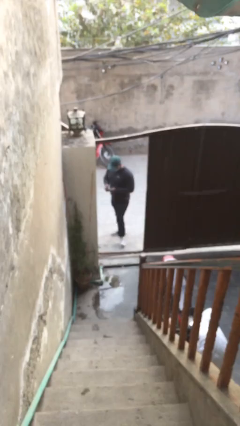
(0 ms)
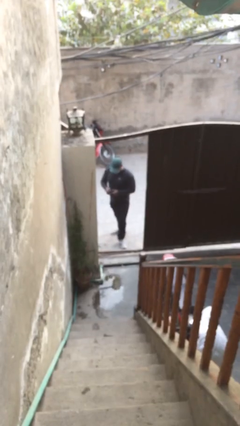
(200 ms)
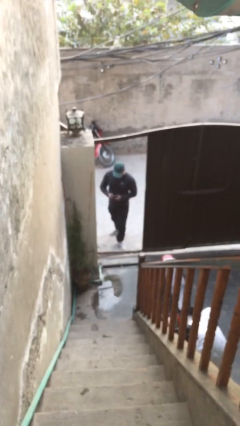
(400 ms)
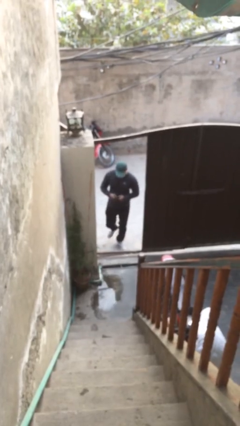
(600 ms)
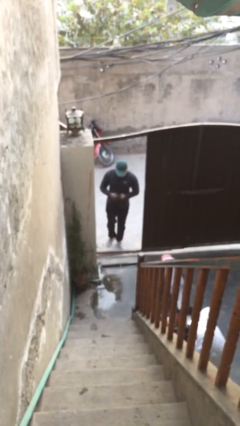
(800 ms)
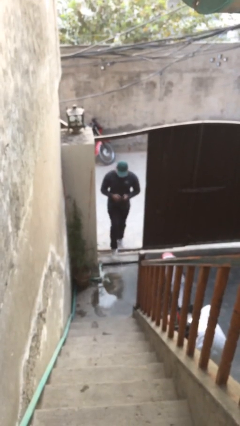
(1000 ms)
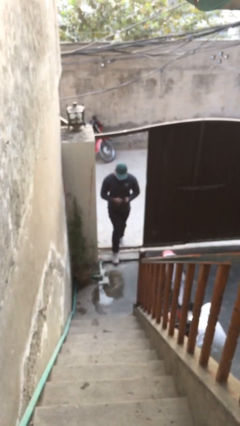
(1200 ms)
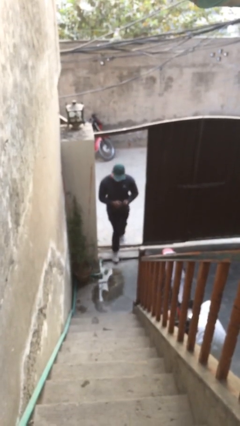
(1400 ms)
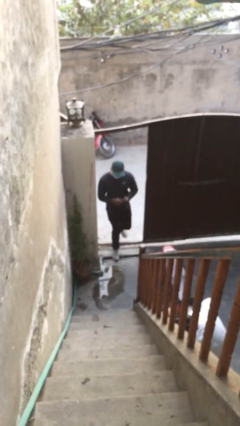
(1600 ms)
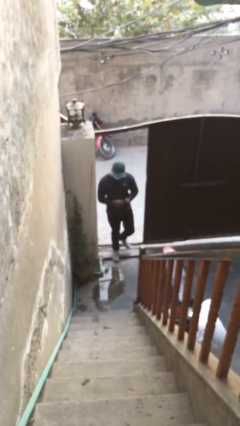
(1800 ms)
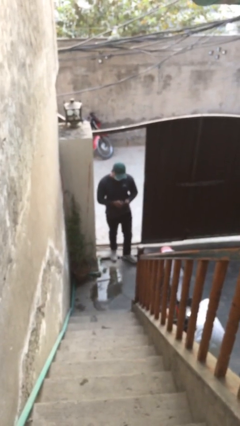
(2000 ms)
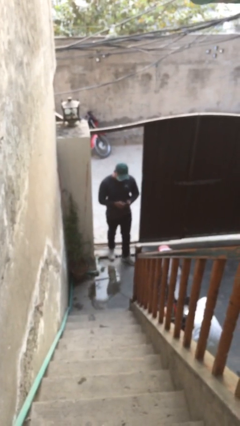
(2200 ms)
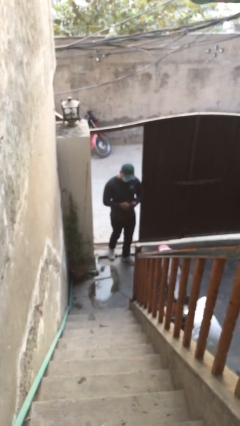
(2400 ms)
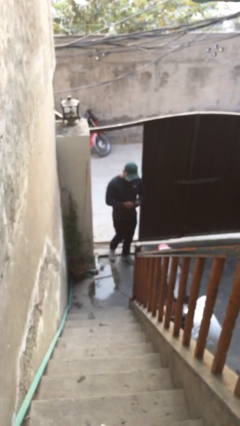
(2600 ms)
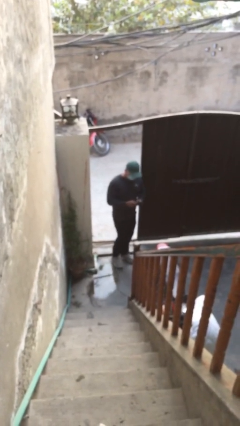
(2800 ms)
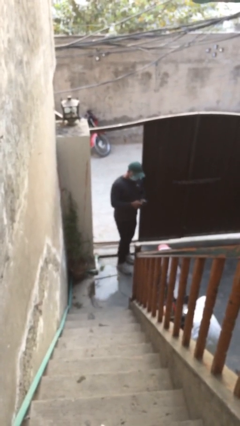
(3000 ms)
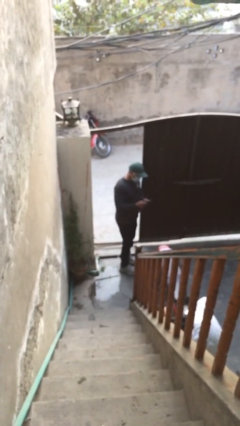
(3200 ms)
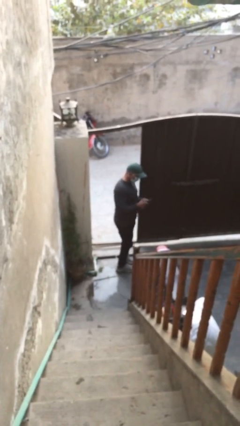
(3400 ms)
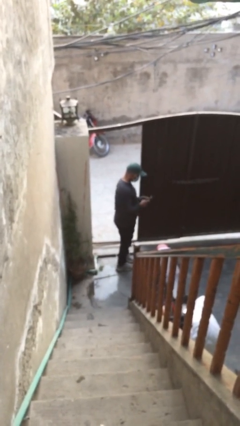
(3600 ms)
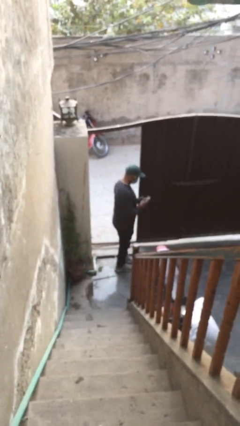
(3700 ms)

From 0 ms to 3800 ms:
person enters scene through structure

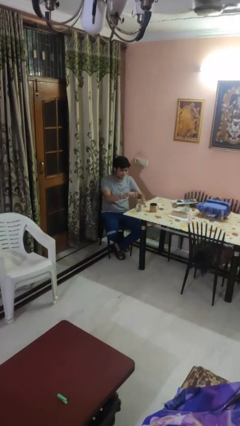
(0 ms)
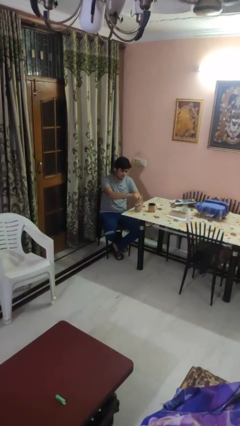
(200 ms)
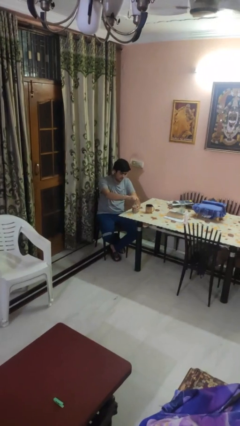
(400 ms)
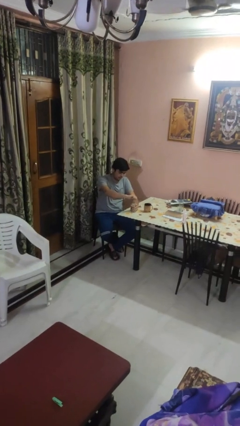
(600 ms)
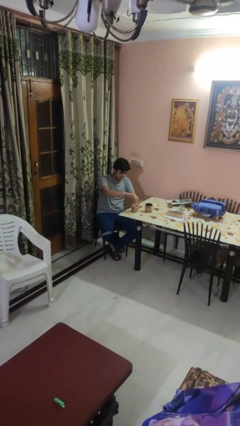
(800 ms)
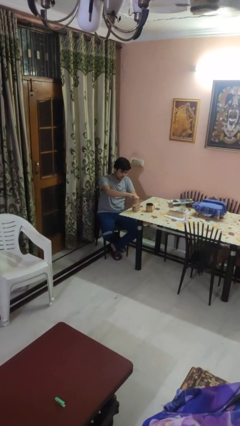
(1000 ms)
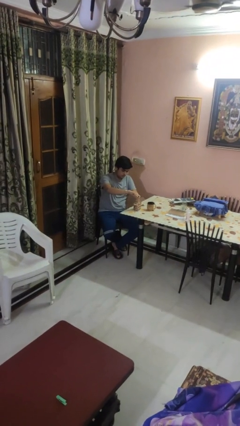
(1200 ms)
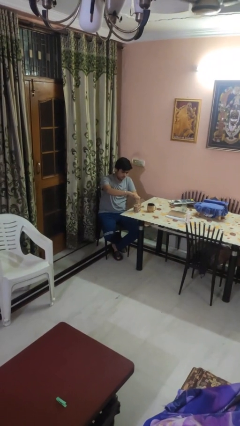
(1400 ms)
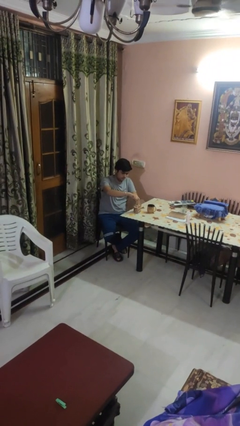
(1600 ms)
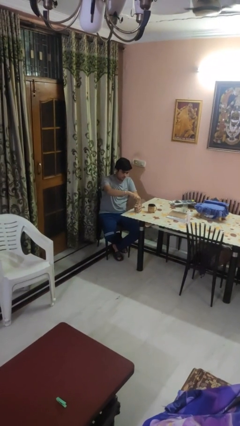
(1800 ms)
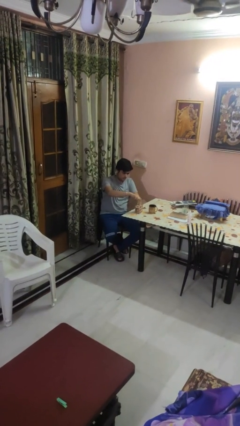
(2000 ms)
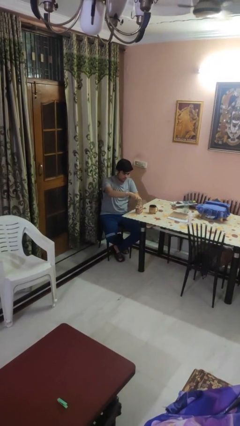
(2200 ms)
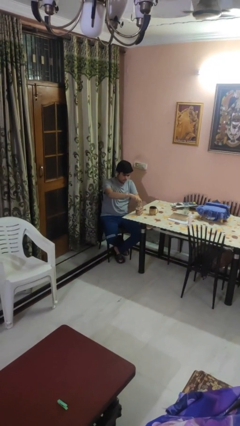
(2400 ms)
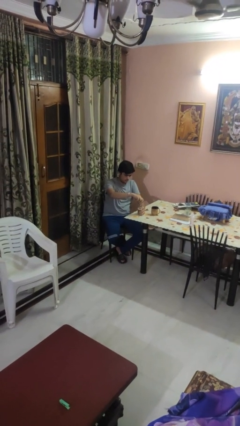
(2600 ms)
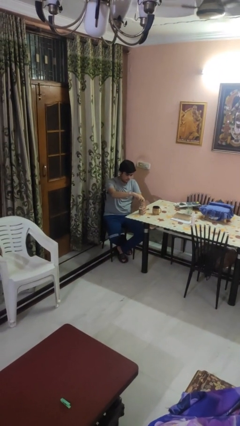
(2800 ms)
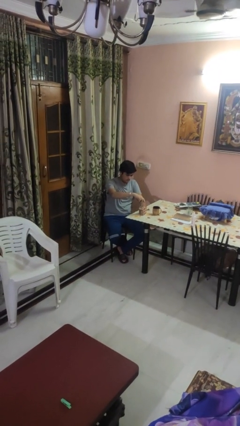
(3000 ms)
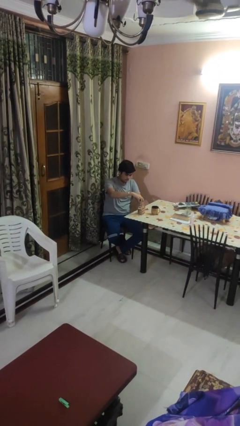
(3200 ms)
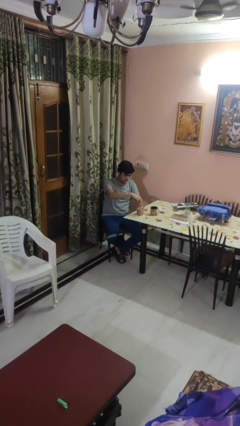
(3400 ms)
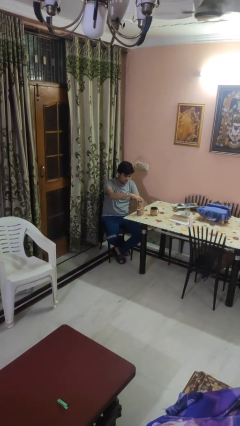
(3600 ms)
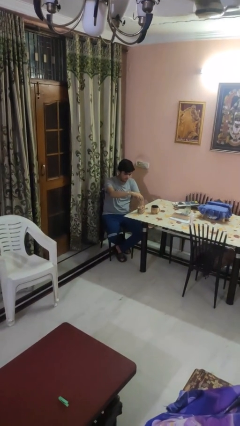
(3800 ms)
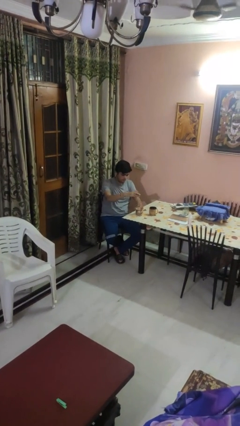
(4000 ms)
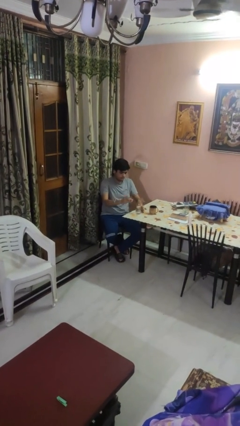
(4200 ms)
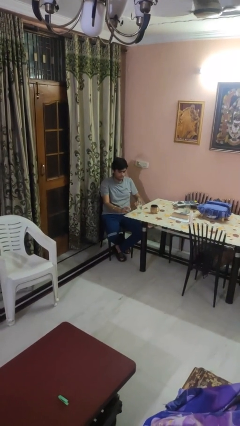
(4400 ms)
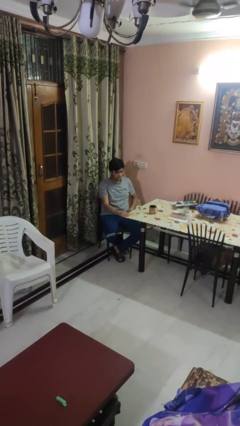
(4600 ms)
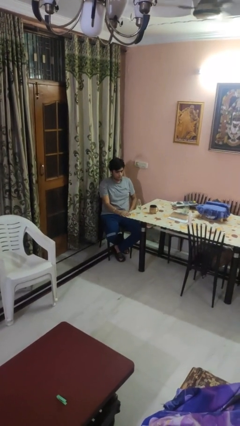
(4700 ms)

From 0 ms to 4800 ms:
person unscrews lid from bottle

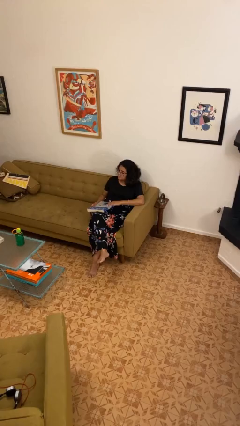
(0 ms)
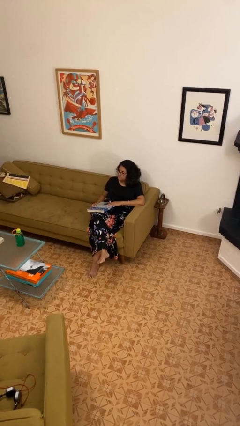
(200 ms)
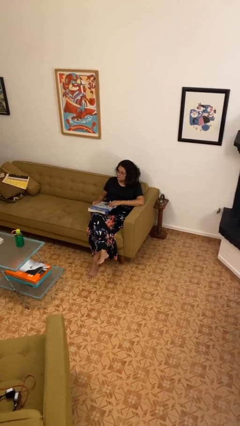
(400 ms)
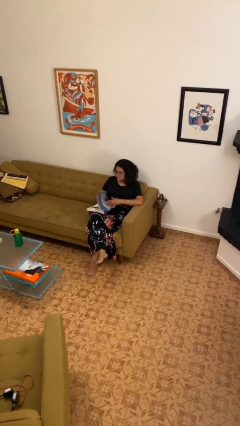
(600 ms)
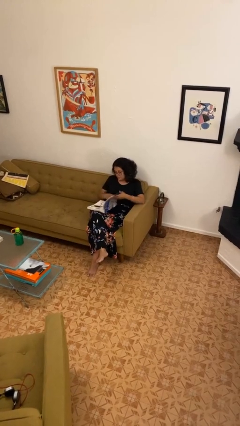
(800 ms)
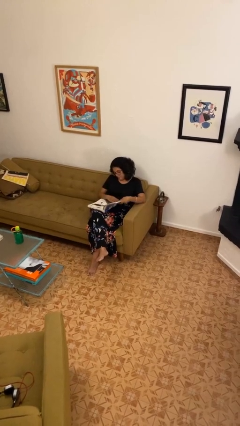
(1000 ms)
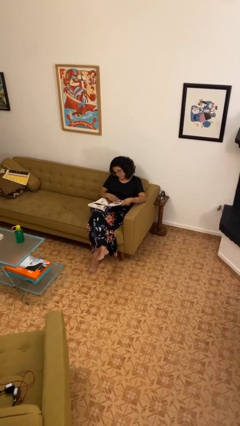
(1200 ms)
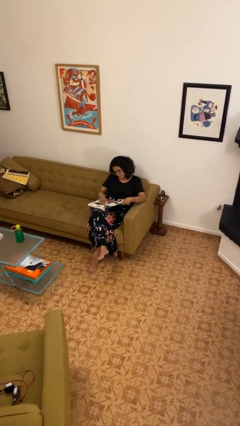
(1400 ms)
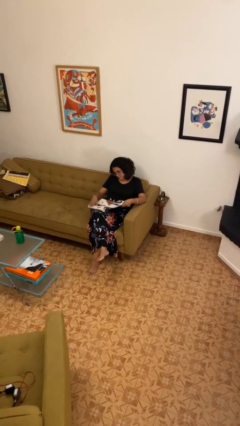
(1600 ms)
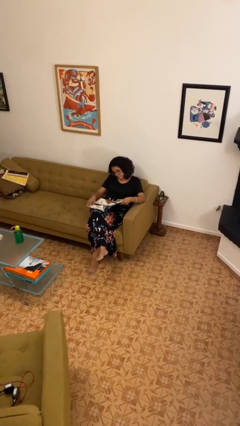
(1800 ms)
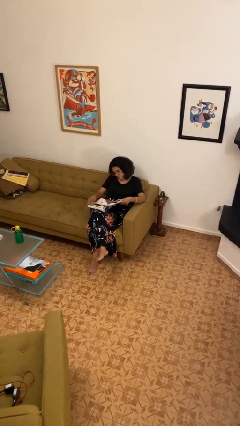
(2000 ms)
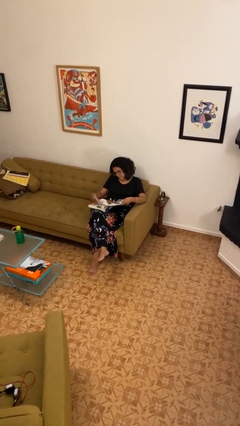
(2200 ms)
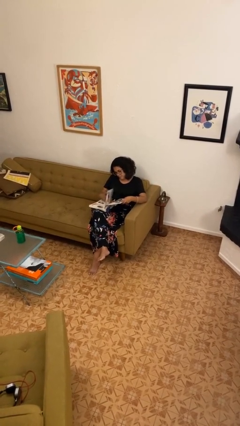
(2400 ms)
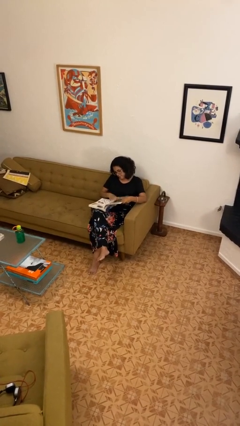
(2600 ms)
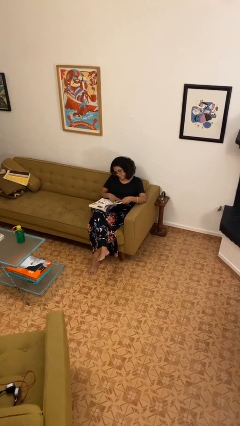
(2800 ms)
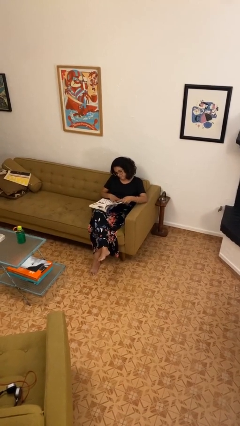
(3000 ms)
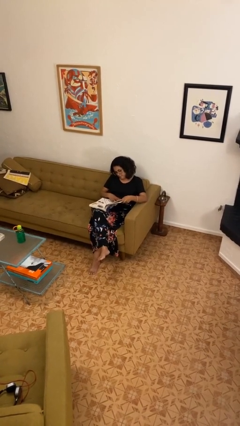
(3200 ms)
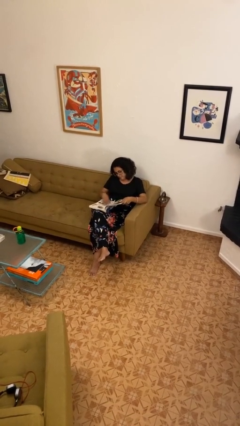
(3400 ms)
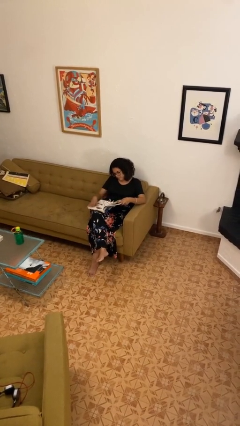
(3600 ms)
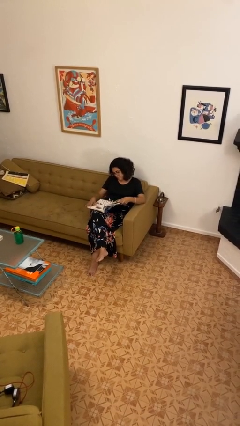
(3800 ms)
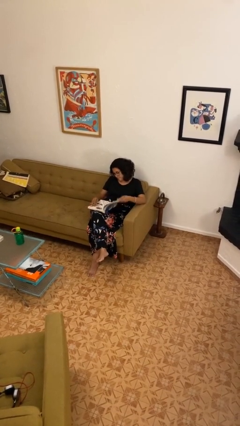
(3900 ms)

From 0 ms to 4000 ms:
person reads book

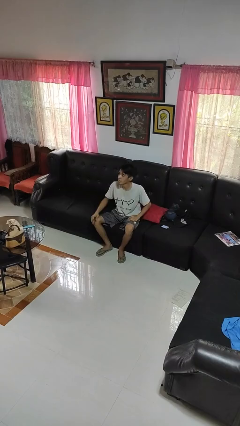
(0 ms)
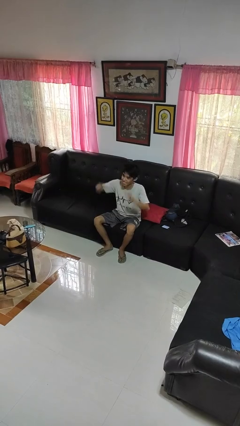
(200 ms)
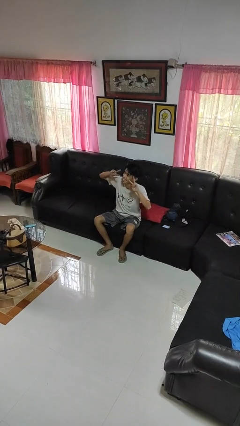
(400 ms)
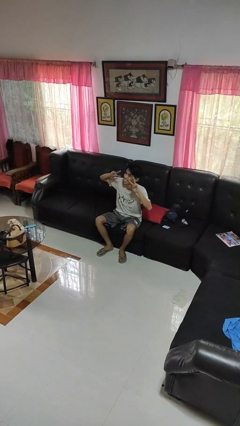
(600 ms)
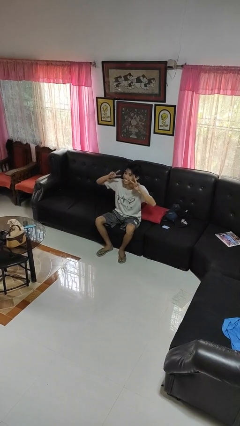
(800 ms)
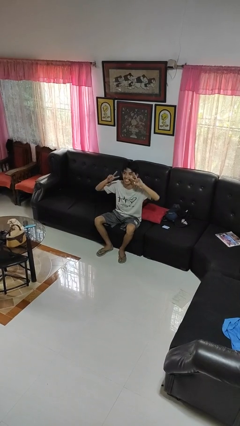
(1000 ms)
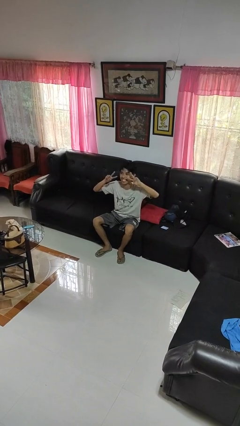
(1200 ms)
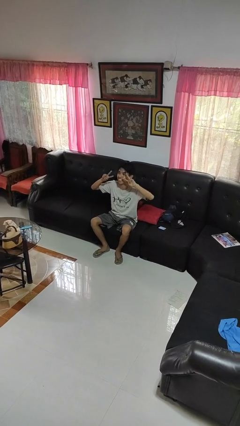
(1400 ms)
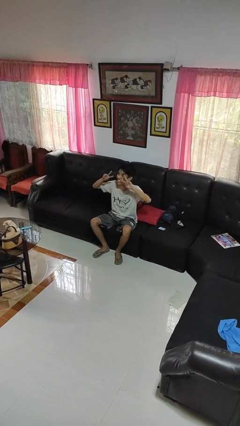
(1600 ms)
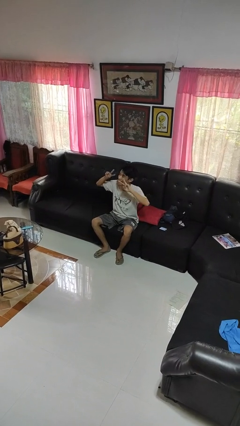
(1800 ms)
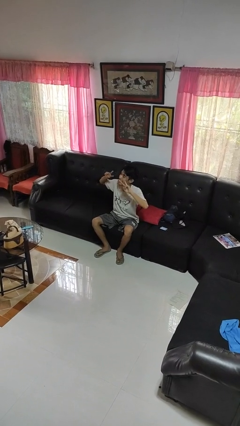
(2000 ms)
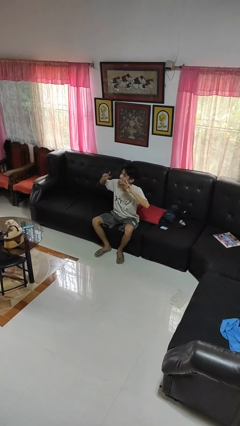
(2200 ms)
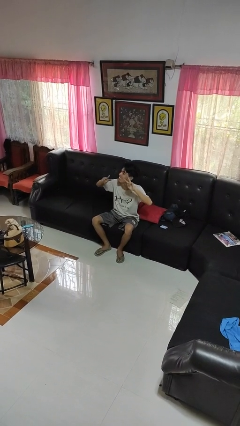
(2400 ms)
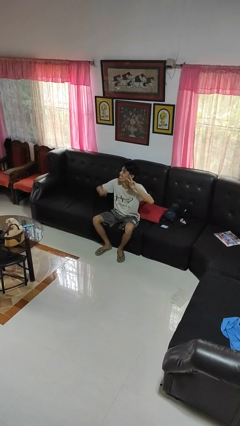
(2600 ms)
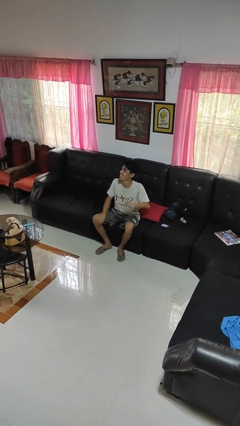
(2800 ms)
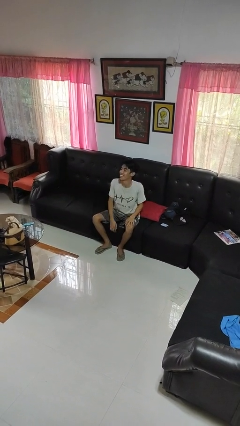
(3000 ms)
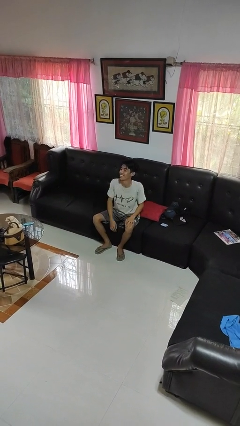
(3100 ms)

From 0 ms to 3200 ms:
person gestures peace

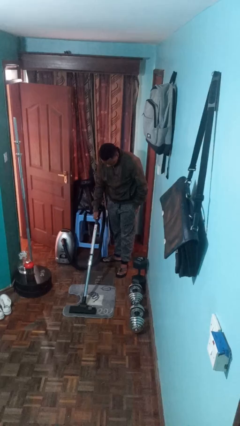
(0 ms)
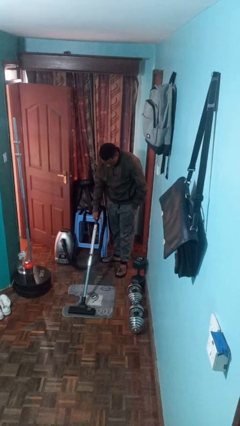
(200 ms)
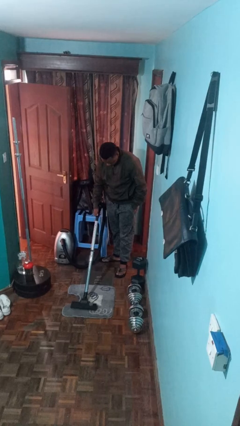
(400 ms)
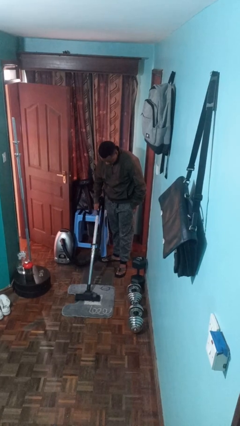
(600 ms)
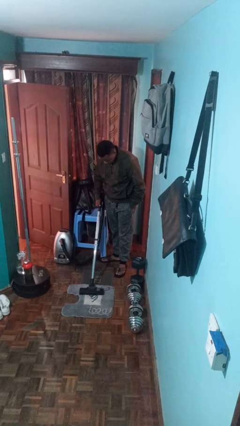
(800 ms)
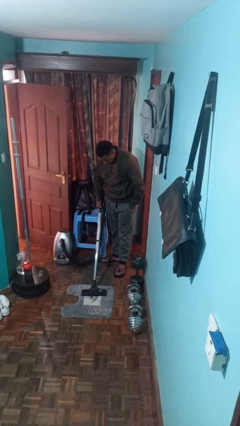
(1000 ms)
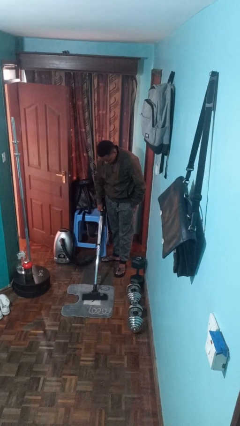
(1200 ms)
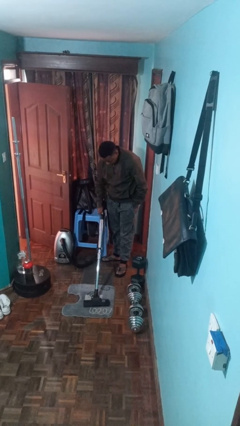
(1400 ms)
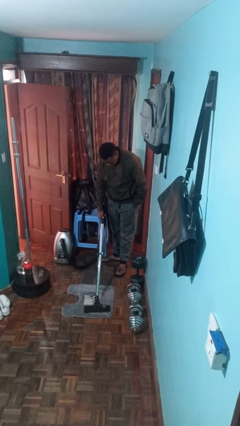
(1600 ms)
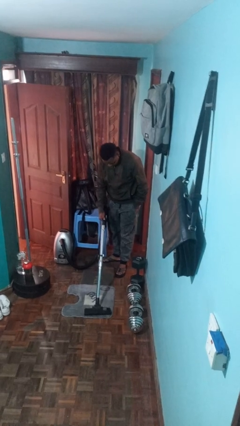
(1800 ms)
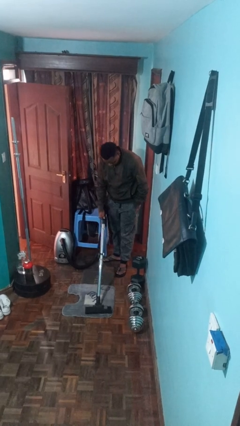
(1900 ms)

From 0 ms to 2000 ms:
person vacuums carpet
